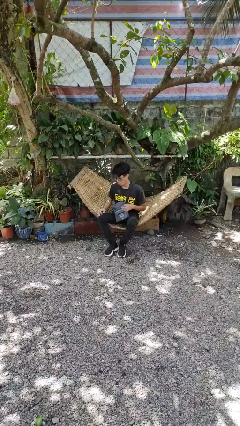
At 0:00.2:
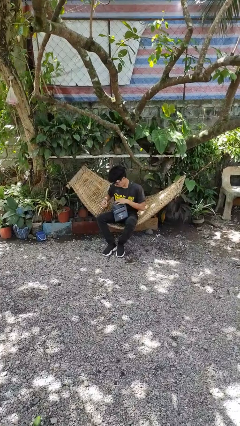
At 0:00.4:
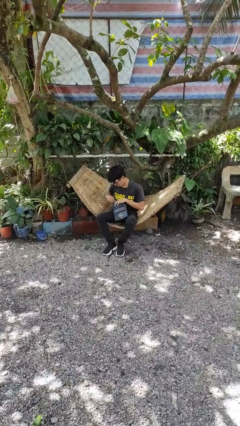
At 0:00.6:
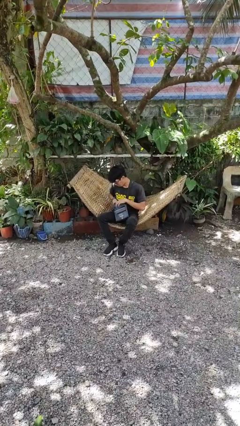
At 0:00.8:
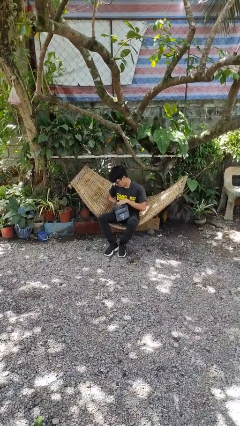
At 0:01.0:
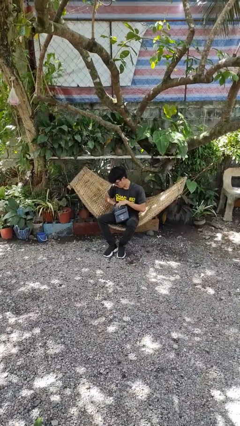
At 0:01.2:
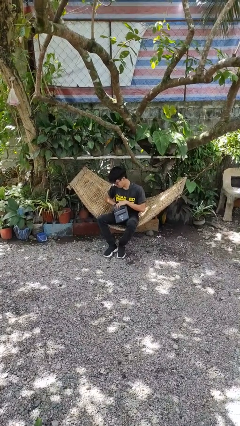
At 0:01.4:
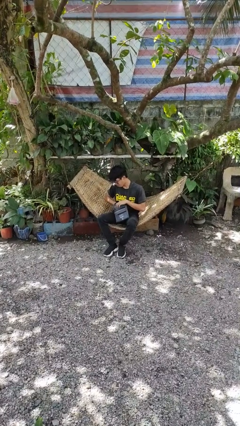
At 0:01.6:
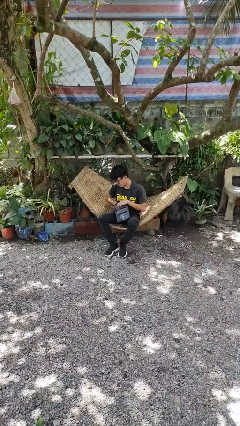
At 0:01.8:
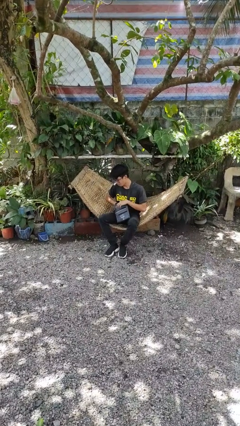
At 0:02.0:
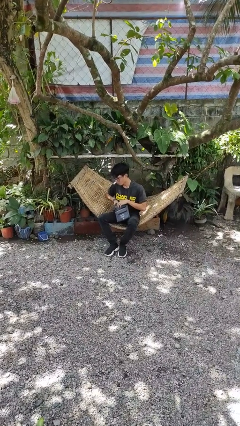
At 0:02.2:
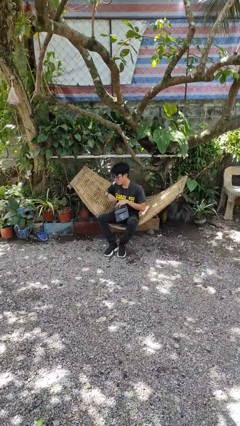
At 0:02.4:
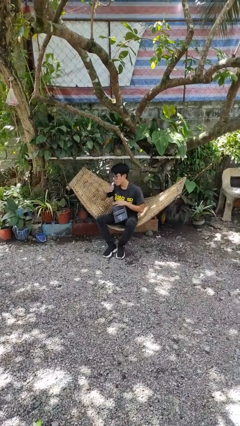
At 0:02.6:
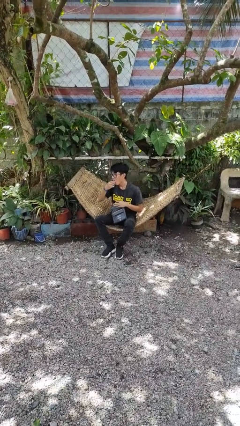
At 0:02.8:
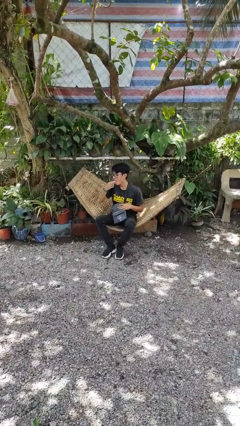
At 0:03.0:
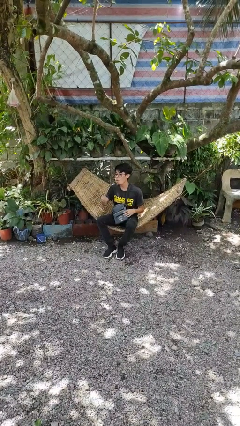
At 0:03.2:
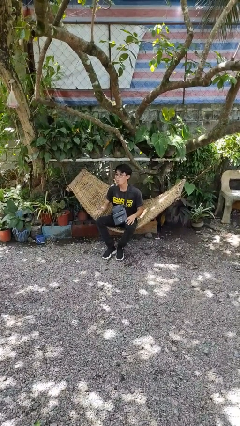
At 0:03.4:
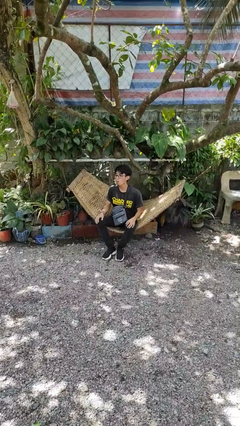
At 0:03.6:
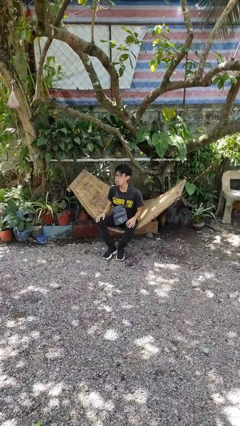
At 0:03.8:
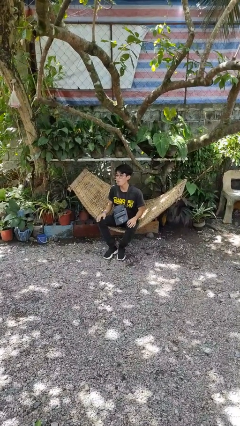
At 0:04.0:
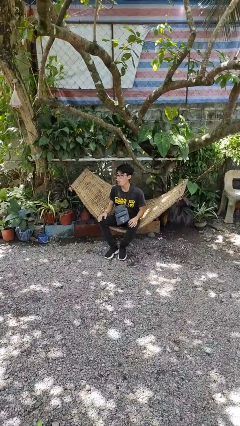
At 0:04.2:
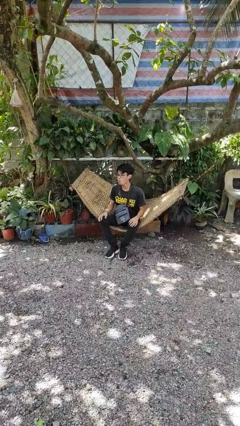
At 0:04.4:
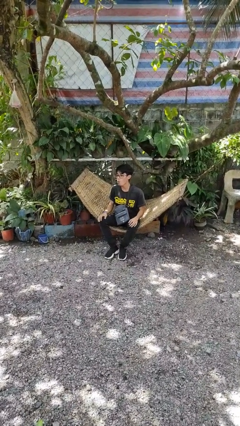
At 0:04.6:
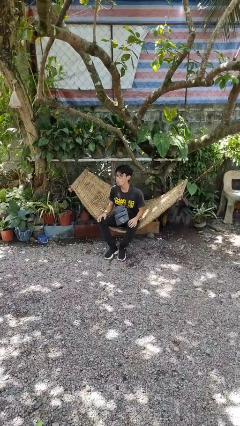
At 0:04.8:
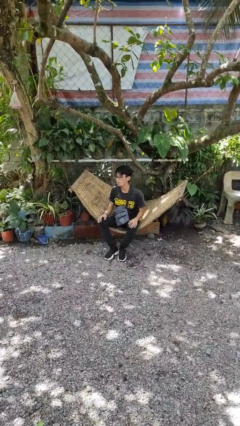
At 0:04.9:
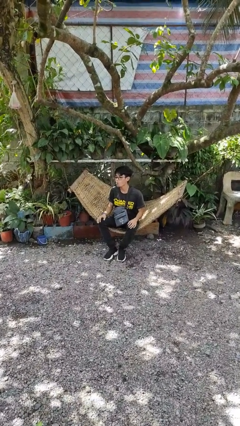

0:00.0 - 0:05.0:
person eats snack from bag

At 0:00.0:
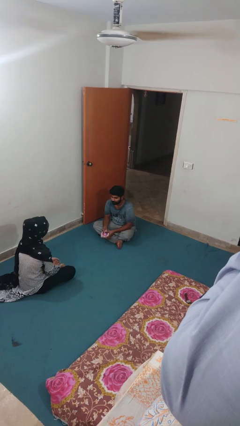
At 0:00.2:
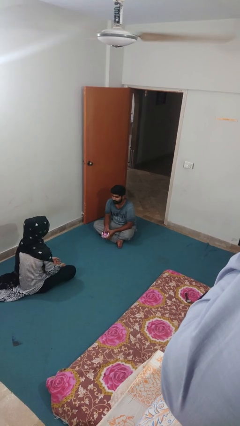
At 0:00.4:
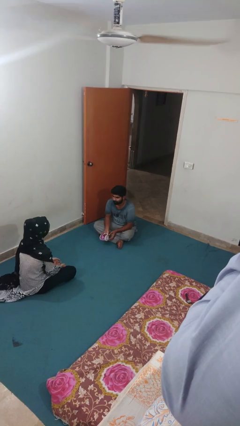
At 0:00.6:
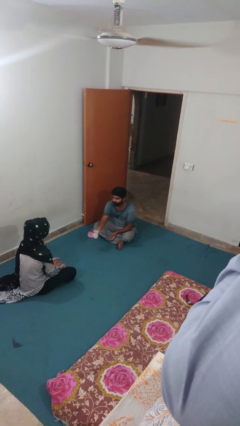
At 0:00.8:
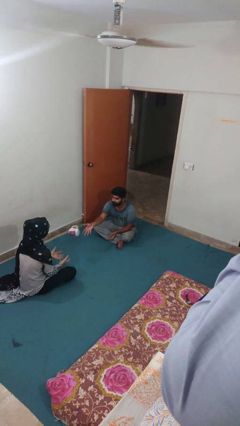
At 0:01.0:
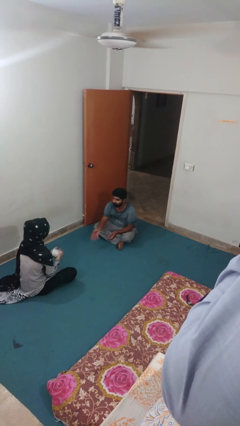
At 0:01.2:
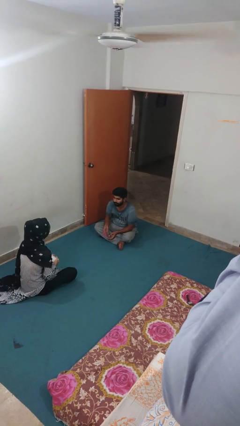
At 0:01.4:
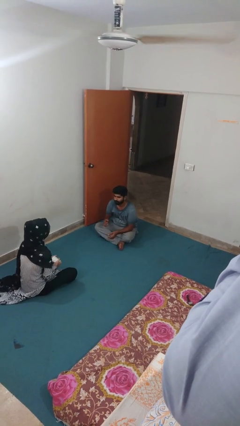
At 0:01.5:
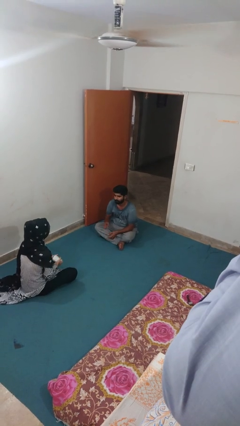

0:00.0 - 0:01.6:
person throws object to person

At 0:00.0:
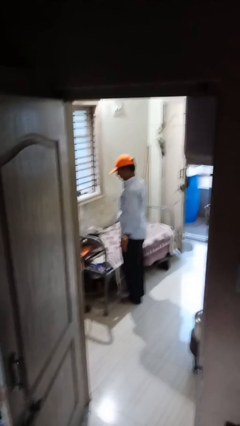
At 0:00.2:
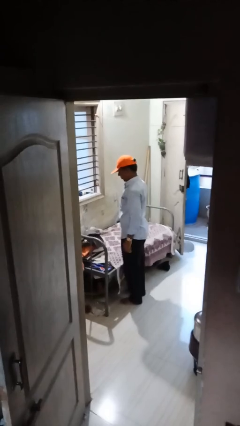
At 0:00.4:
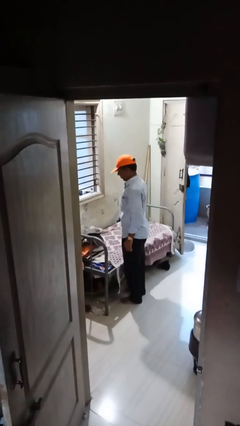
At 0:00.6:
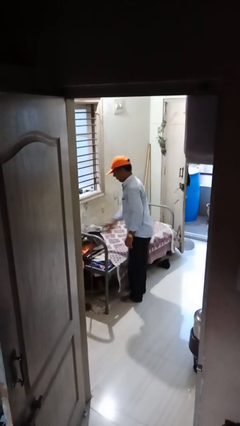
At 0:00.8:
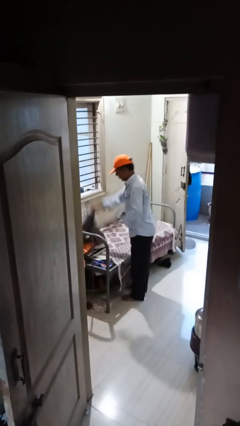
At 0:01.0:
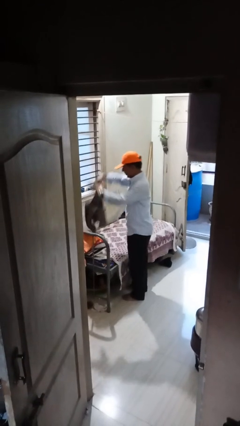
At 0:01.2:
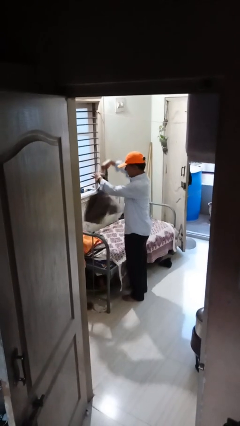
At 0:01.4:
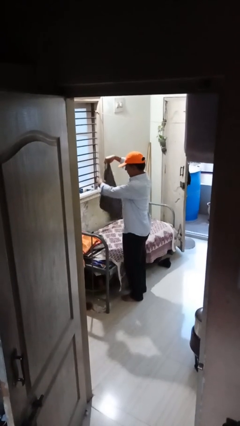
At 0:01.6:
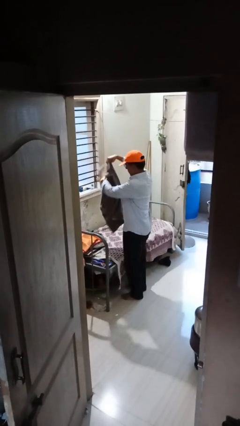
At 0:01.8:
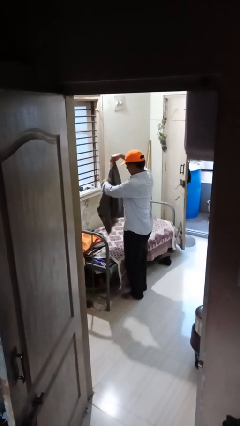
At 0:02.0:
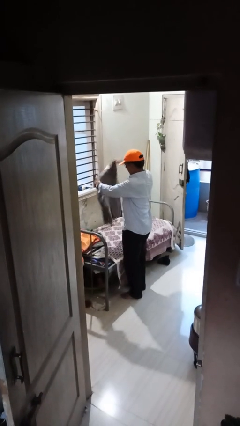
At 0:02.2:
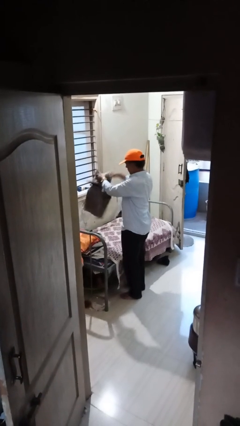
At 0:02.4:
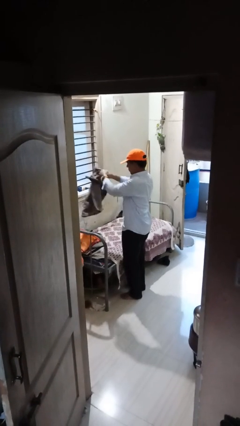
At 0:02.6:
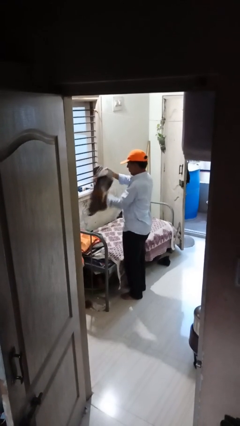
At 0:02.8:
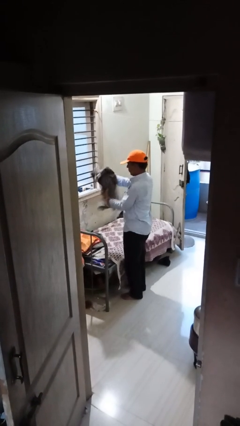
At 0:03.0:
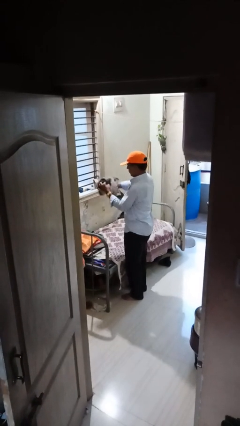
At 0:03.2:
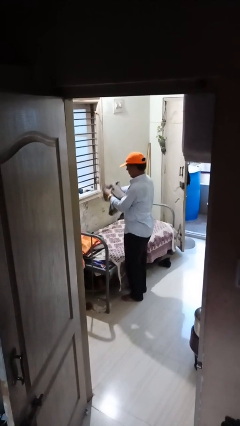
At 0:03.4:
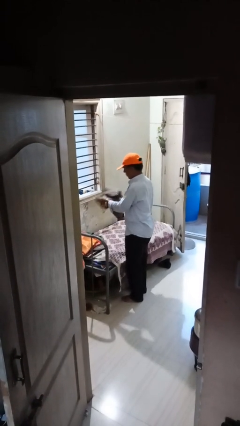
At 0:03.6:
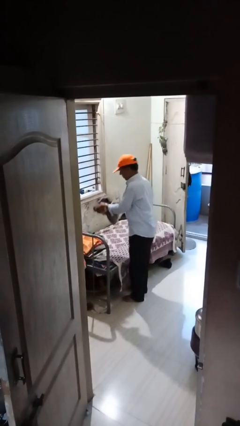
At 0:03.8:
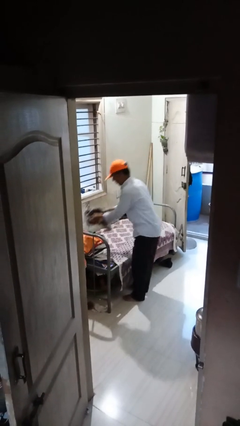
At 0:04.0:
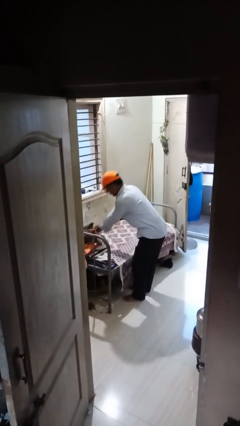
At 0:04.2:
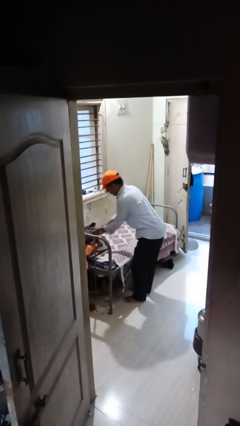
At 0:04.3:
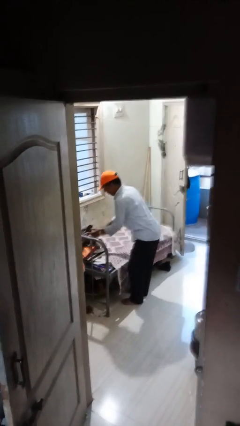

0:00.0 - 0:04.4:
person folds pants

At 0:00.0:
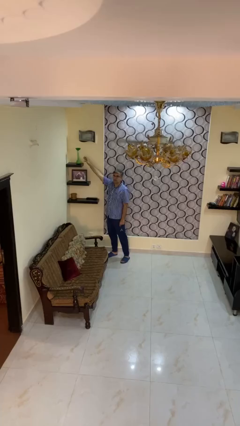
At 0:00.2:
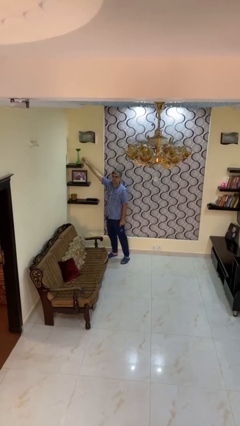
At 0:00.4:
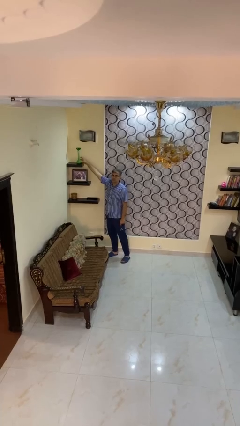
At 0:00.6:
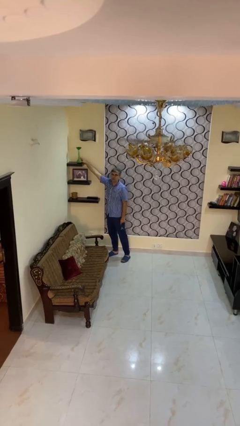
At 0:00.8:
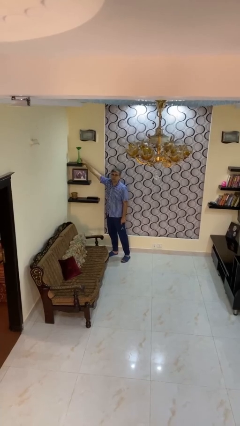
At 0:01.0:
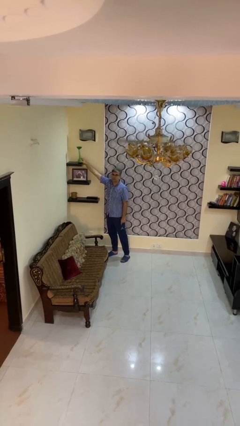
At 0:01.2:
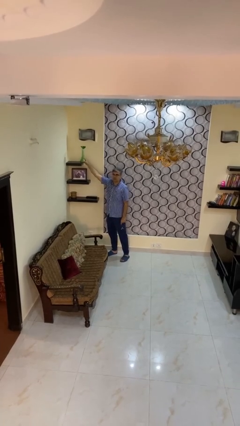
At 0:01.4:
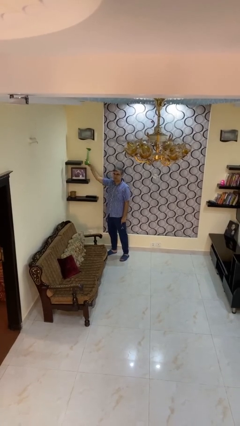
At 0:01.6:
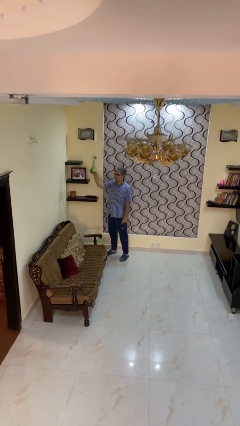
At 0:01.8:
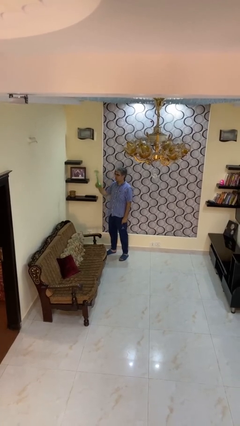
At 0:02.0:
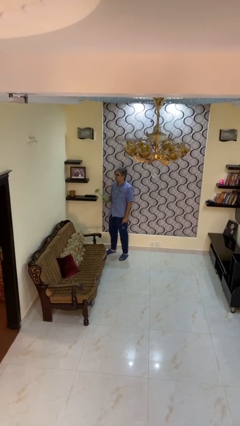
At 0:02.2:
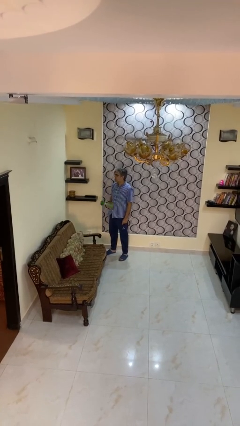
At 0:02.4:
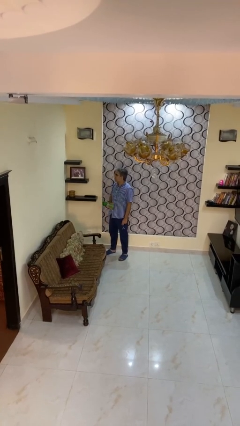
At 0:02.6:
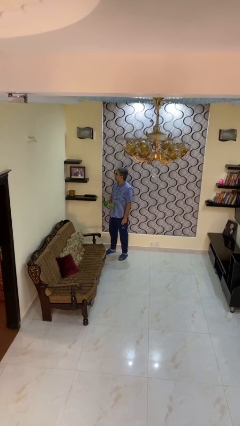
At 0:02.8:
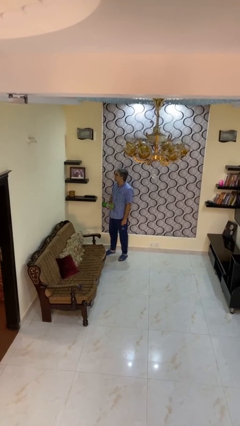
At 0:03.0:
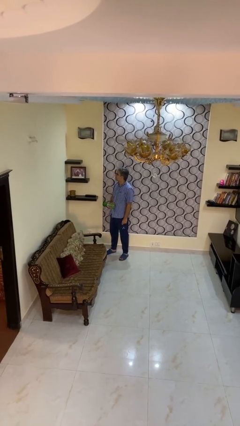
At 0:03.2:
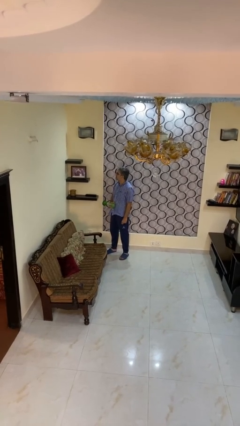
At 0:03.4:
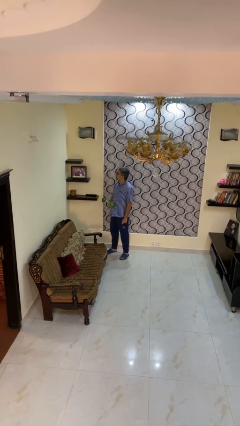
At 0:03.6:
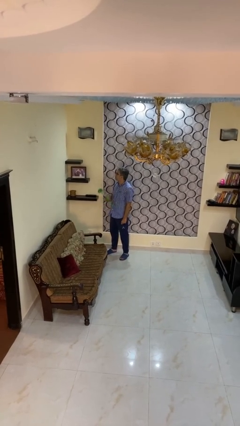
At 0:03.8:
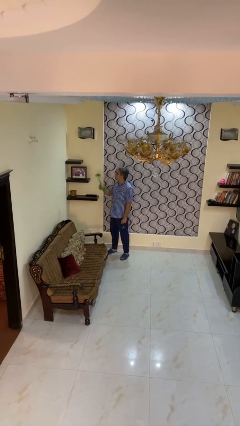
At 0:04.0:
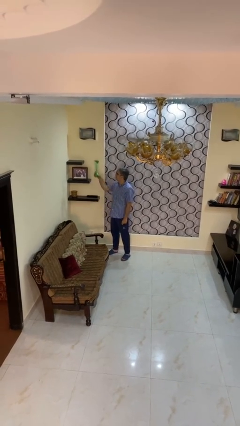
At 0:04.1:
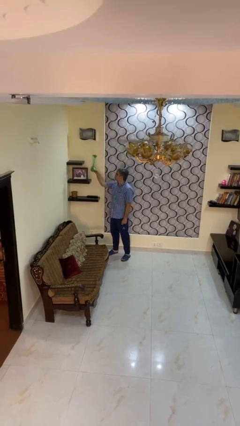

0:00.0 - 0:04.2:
person picks up object from shelf

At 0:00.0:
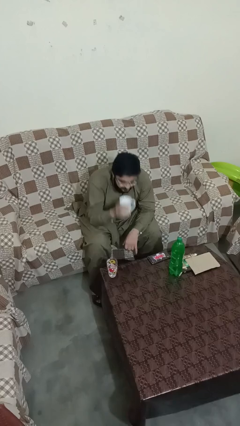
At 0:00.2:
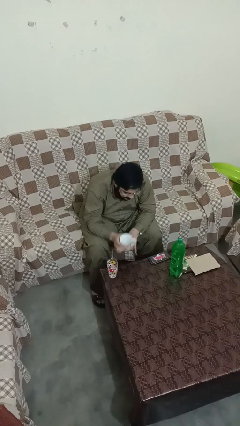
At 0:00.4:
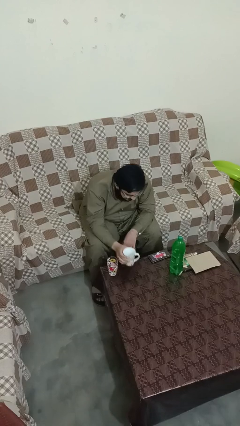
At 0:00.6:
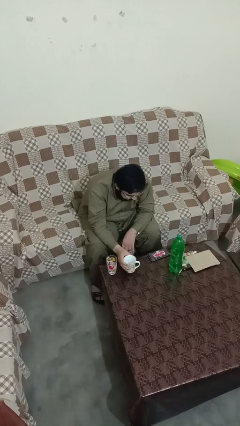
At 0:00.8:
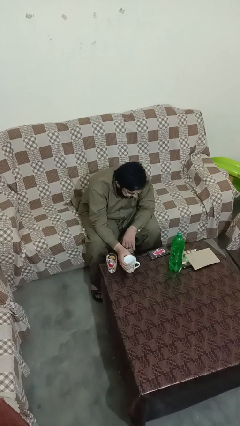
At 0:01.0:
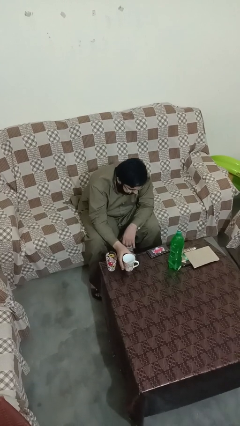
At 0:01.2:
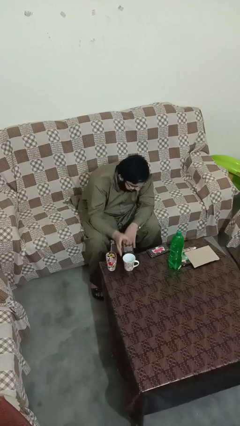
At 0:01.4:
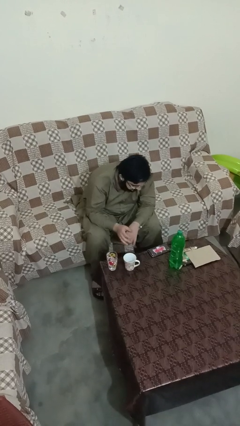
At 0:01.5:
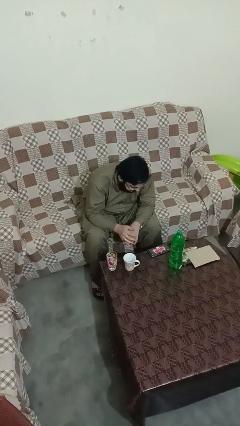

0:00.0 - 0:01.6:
person puts down object on table

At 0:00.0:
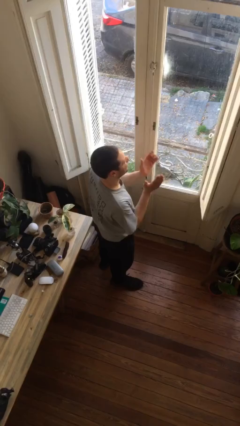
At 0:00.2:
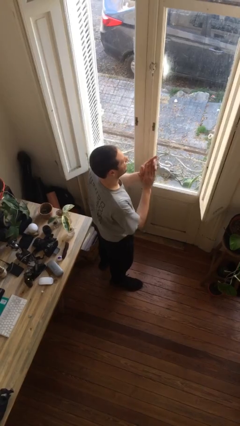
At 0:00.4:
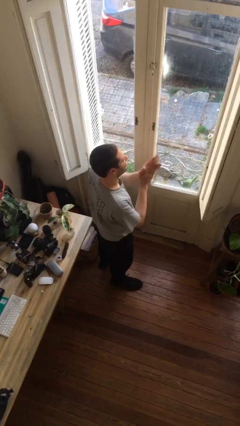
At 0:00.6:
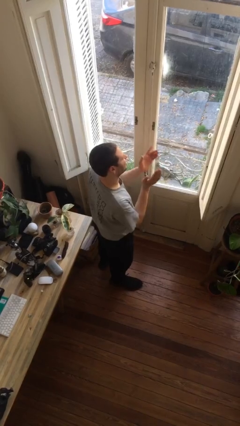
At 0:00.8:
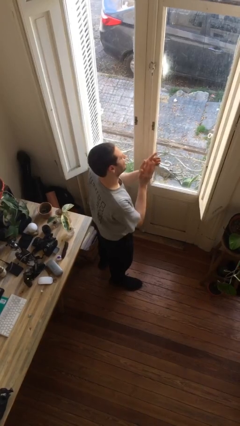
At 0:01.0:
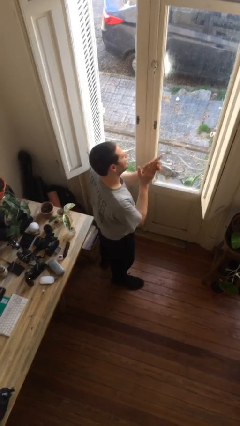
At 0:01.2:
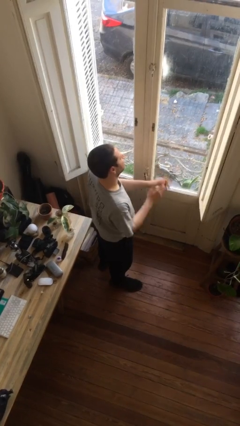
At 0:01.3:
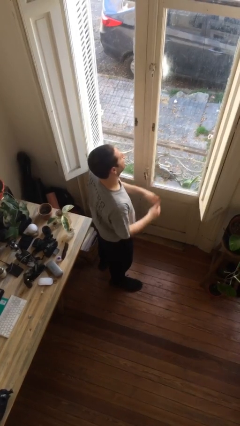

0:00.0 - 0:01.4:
person claps hands
